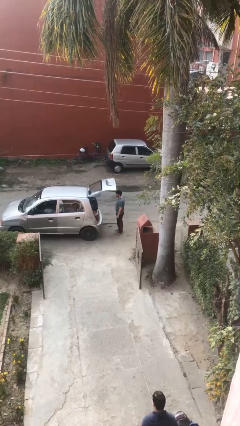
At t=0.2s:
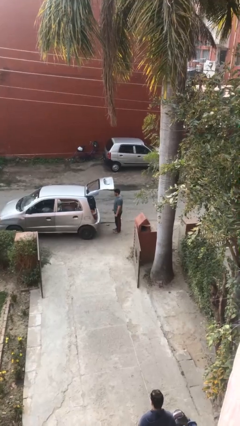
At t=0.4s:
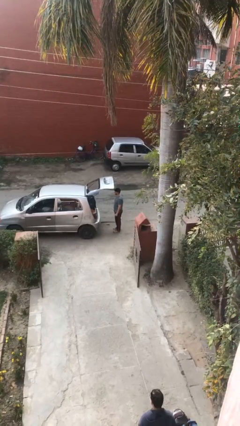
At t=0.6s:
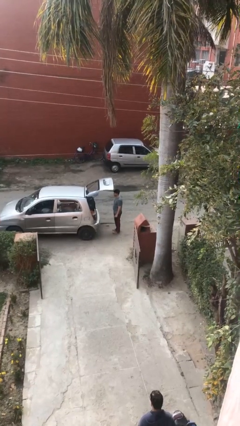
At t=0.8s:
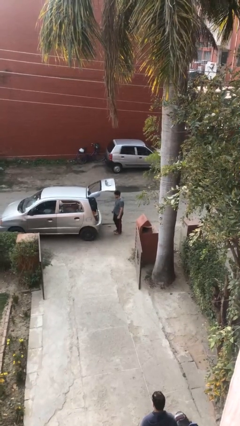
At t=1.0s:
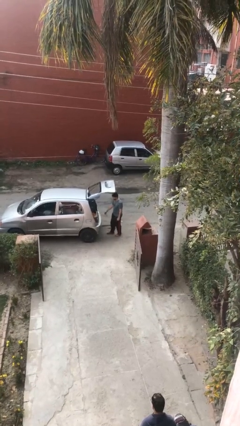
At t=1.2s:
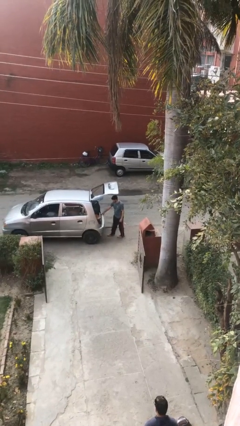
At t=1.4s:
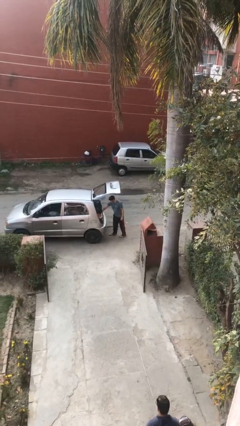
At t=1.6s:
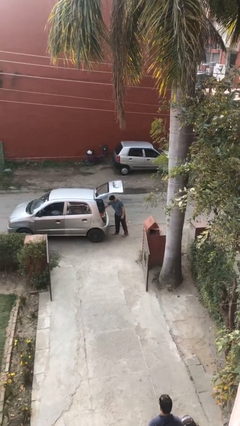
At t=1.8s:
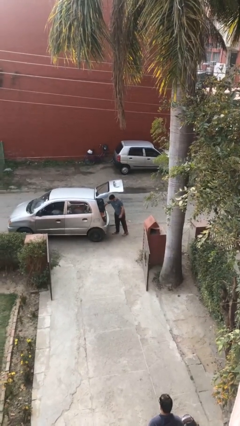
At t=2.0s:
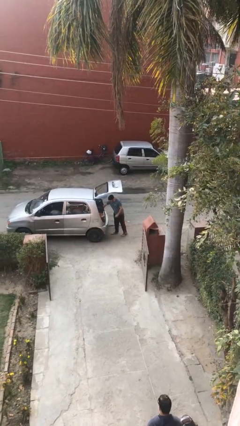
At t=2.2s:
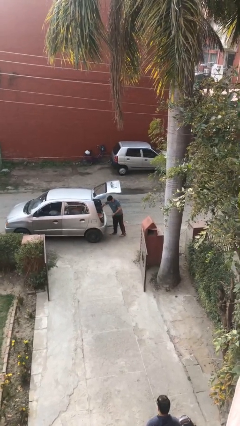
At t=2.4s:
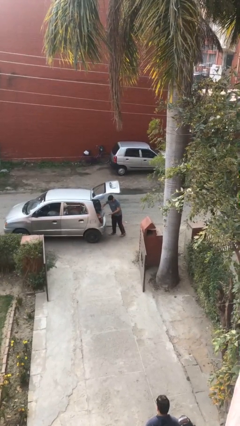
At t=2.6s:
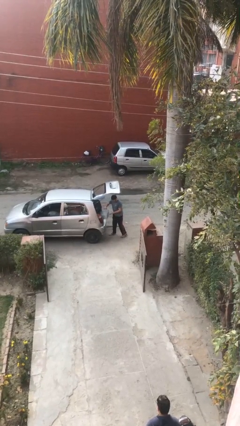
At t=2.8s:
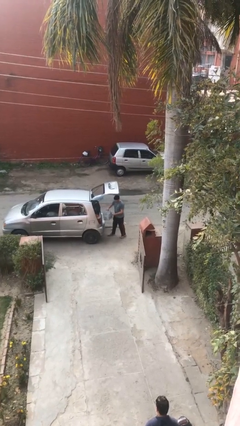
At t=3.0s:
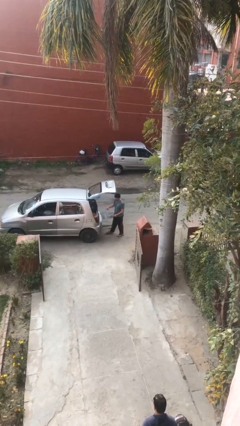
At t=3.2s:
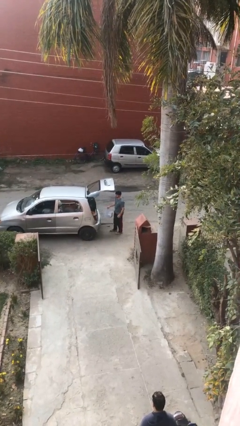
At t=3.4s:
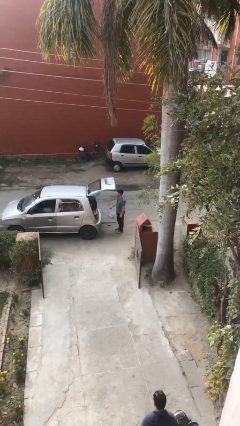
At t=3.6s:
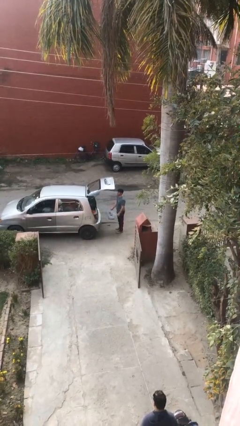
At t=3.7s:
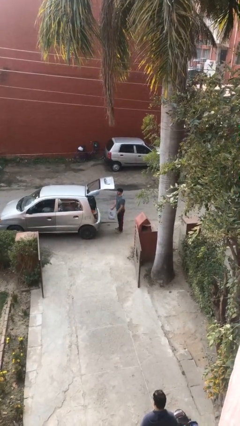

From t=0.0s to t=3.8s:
person unloads car

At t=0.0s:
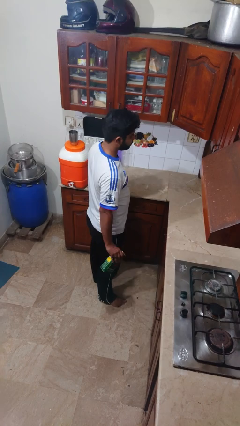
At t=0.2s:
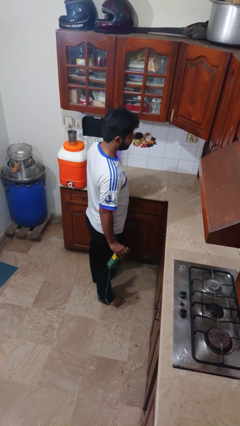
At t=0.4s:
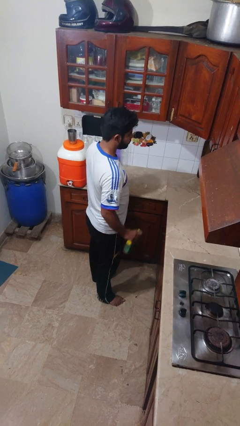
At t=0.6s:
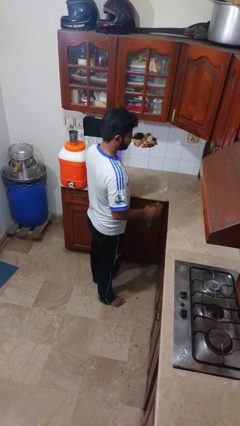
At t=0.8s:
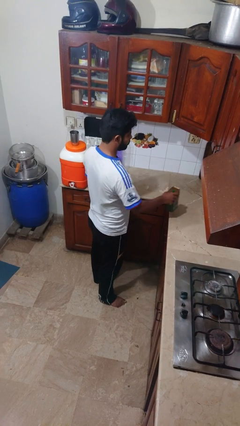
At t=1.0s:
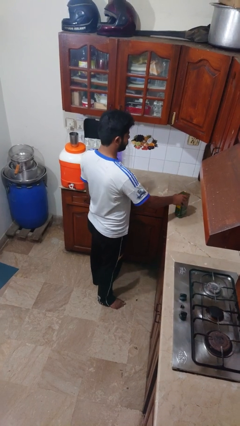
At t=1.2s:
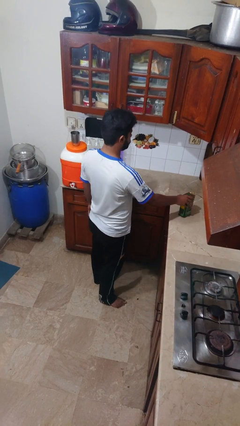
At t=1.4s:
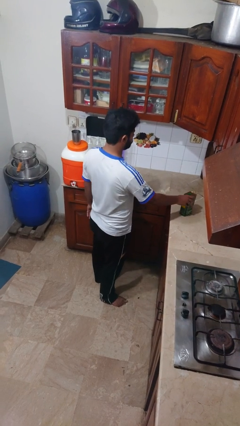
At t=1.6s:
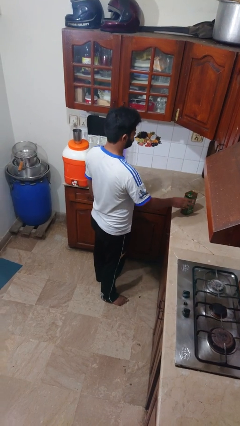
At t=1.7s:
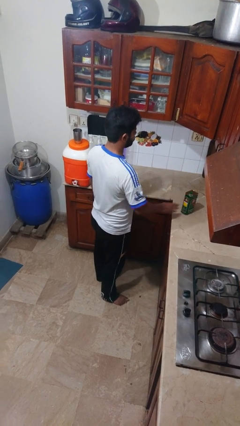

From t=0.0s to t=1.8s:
person puts down object on countertop

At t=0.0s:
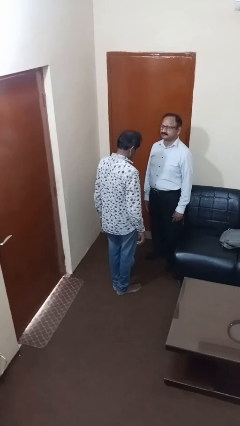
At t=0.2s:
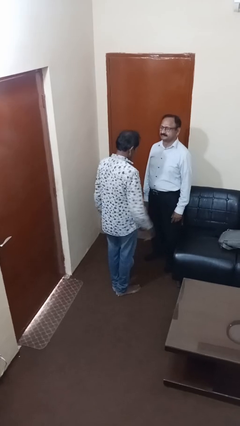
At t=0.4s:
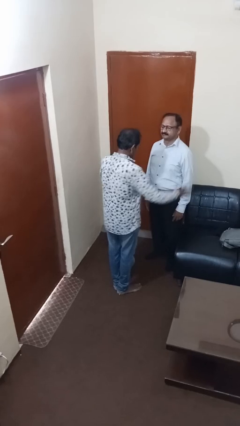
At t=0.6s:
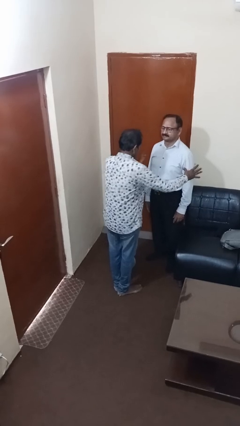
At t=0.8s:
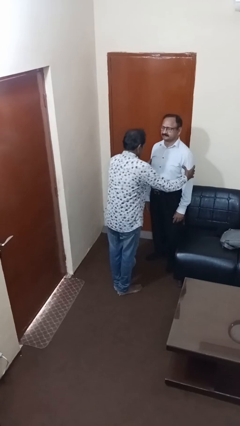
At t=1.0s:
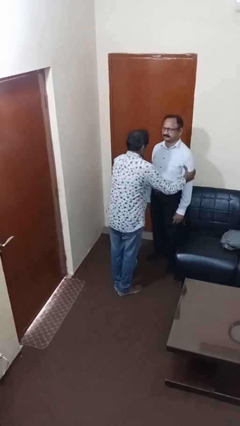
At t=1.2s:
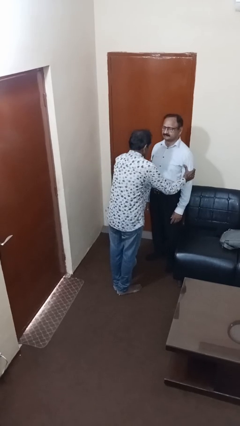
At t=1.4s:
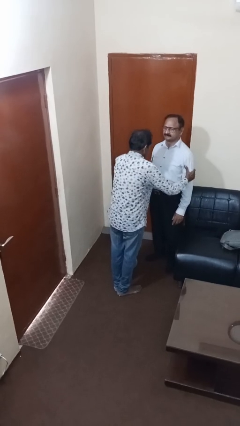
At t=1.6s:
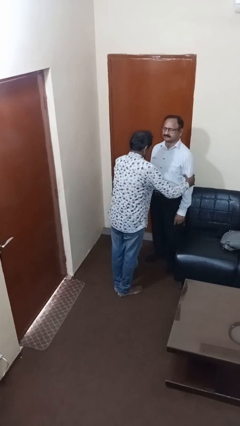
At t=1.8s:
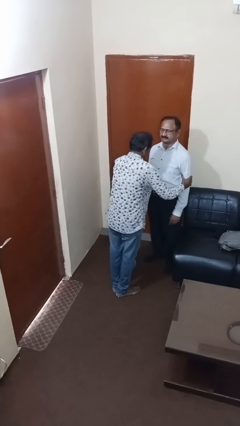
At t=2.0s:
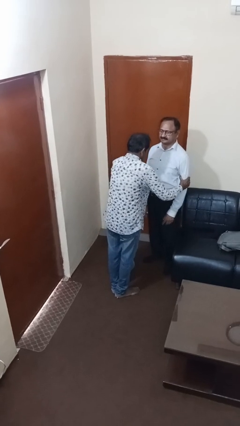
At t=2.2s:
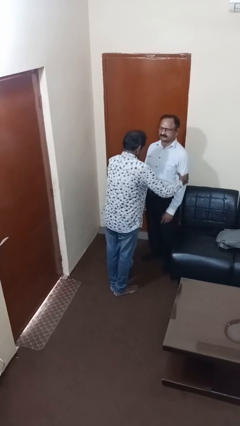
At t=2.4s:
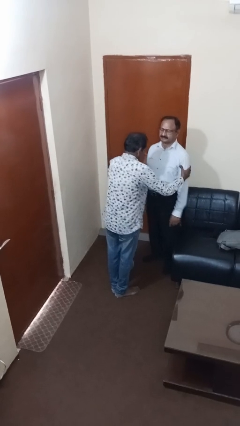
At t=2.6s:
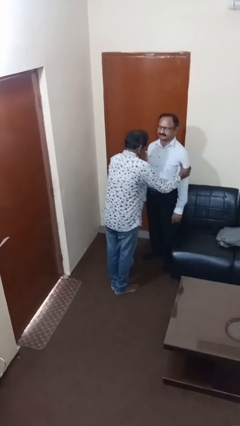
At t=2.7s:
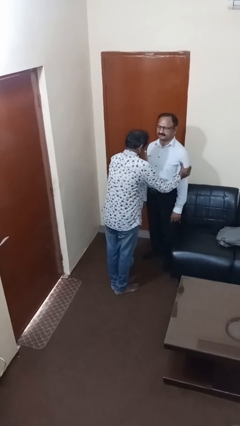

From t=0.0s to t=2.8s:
person grabs person by bicep

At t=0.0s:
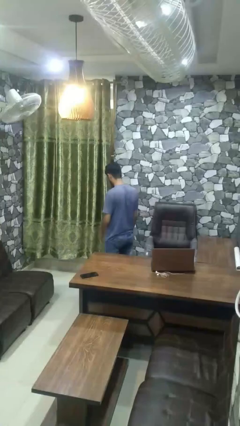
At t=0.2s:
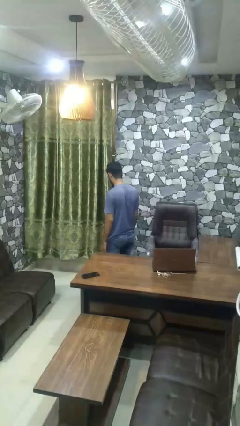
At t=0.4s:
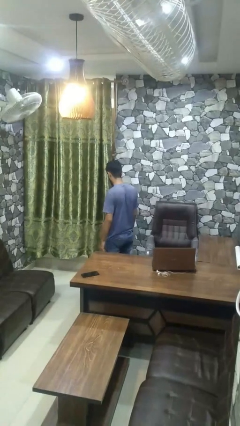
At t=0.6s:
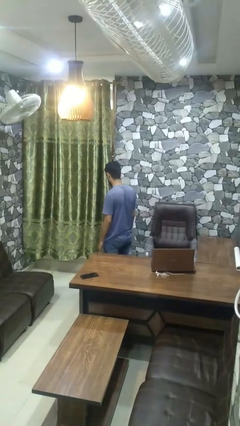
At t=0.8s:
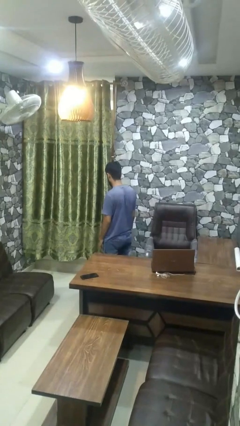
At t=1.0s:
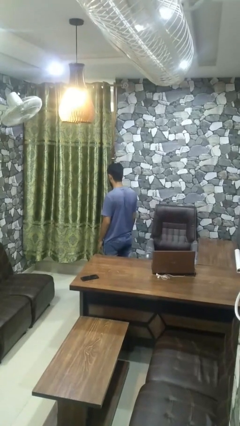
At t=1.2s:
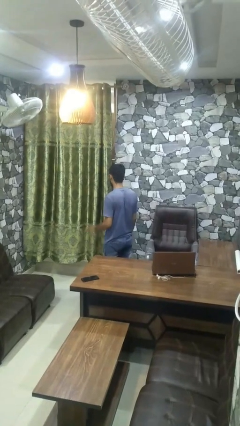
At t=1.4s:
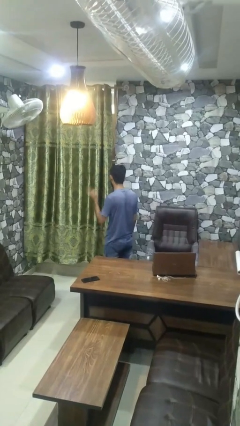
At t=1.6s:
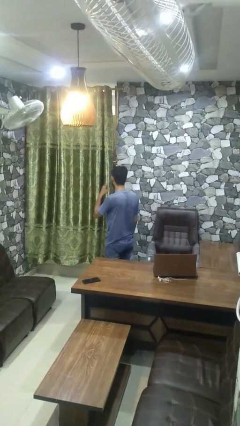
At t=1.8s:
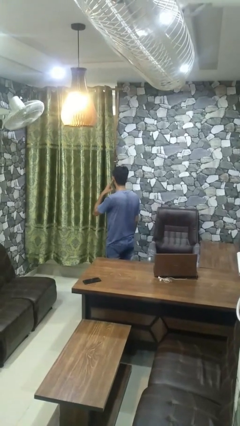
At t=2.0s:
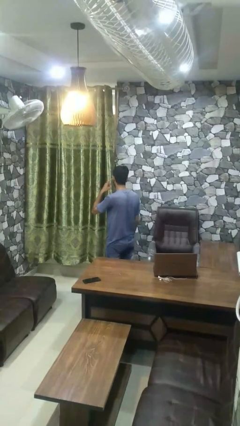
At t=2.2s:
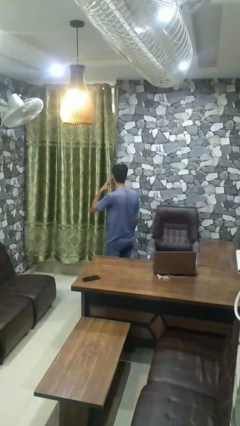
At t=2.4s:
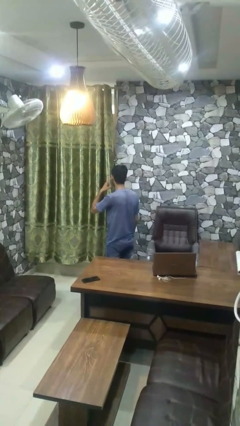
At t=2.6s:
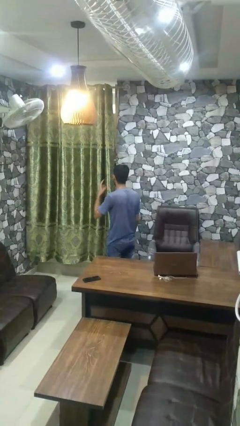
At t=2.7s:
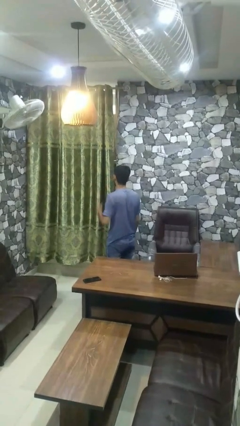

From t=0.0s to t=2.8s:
person gestures listen closely

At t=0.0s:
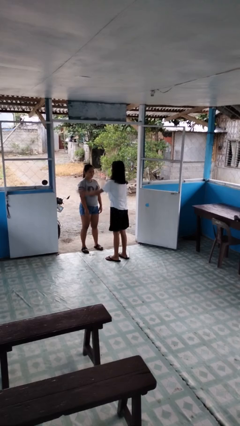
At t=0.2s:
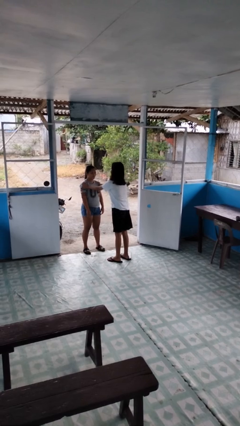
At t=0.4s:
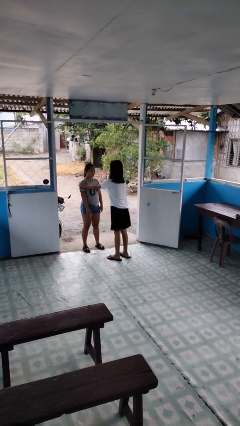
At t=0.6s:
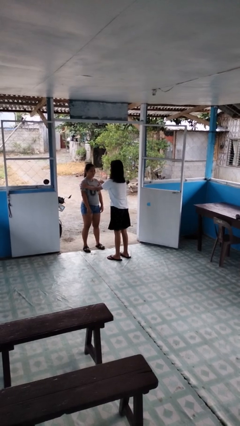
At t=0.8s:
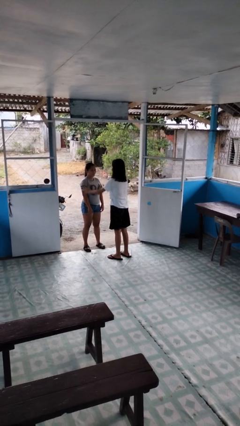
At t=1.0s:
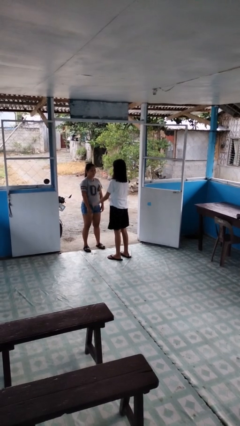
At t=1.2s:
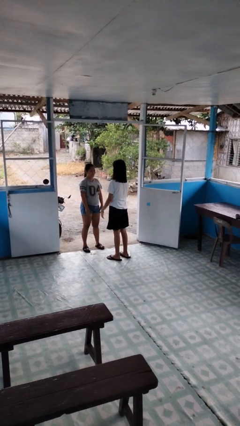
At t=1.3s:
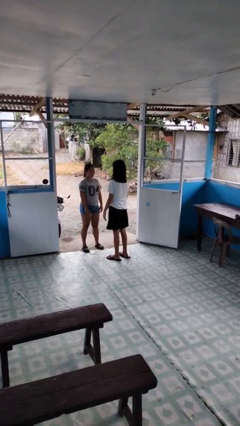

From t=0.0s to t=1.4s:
person pounds shoulders of person

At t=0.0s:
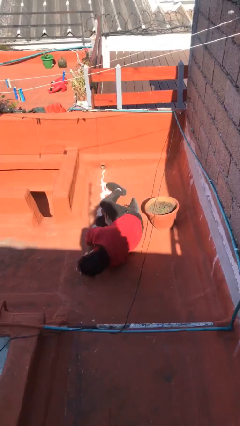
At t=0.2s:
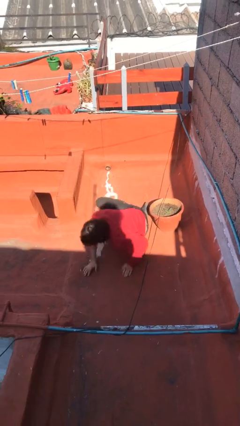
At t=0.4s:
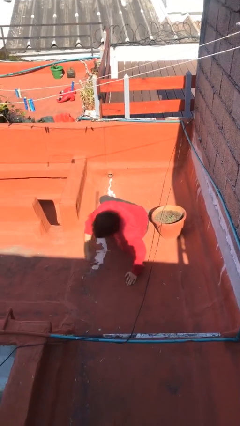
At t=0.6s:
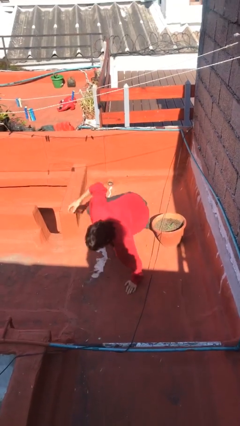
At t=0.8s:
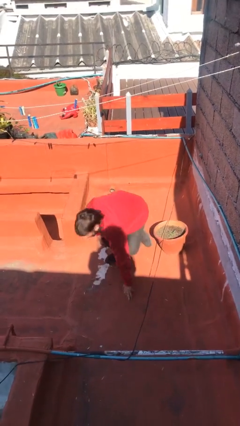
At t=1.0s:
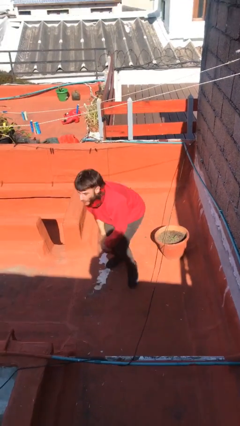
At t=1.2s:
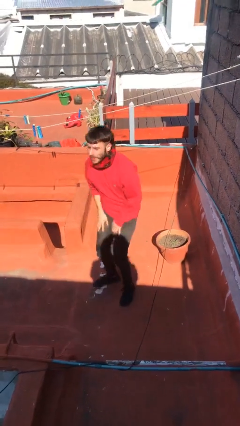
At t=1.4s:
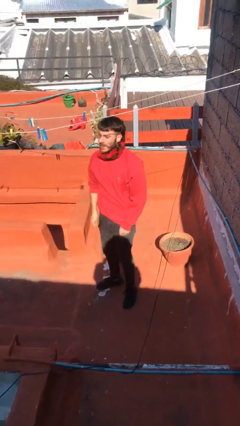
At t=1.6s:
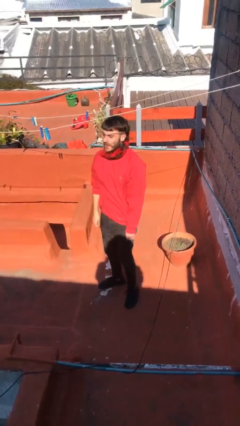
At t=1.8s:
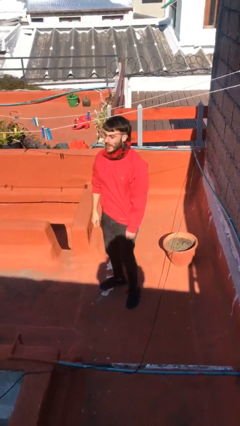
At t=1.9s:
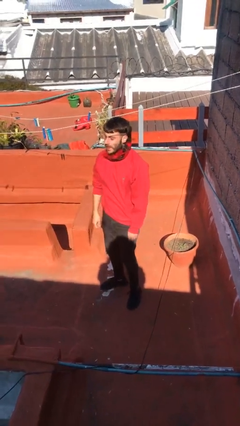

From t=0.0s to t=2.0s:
person stands up from floor

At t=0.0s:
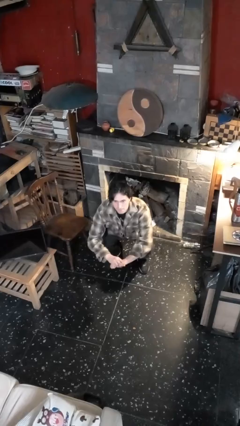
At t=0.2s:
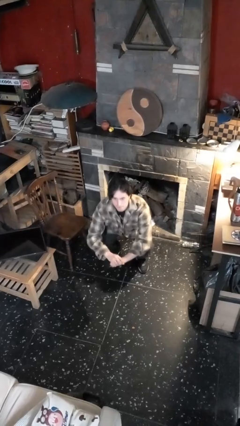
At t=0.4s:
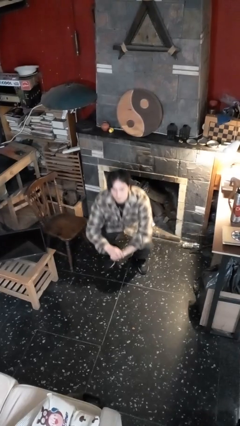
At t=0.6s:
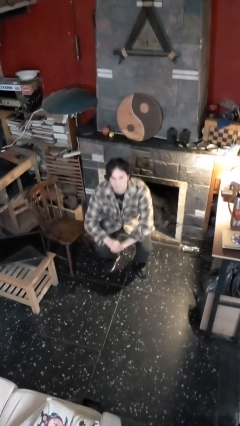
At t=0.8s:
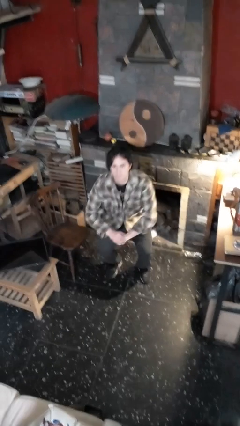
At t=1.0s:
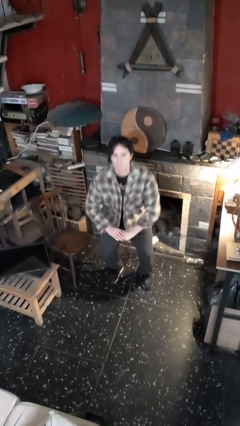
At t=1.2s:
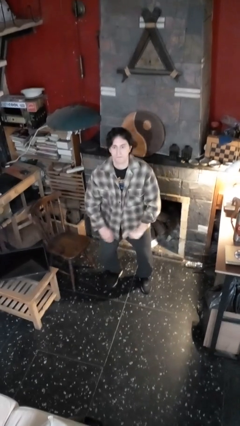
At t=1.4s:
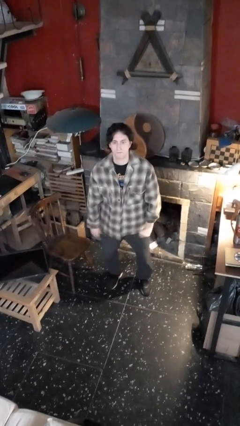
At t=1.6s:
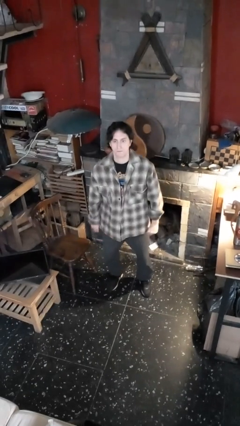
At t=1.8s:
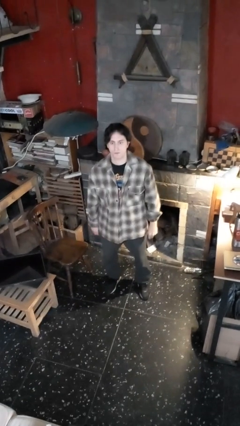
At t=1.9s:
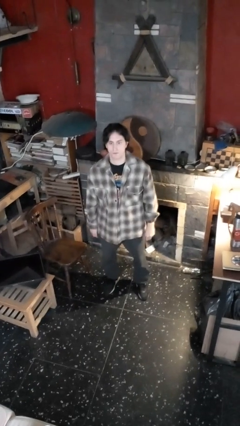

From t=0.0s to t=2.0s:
person stands up
